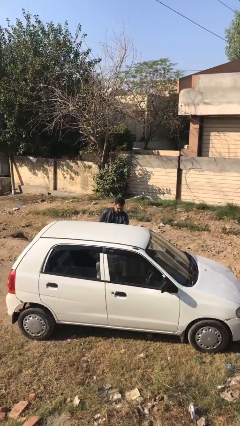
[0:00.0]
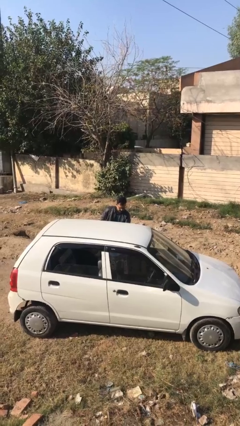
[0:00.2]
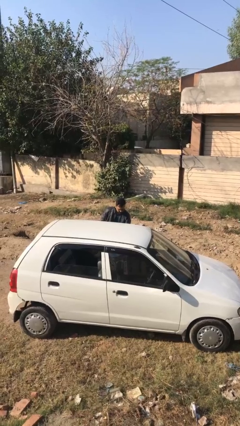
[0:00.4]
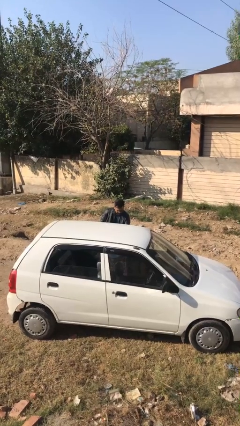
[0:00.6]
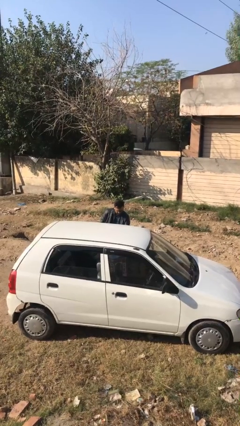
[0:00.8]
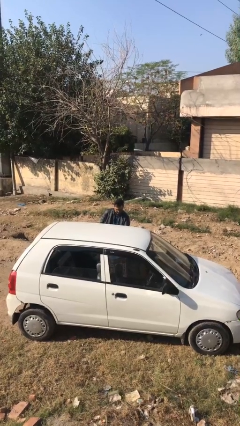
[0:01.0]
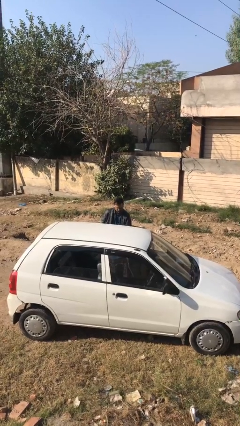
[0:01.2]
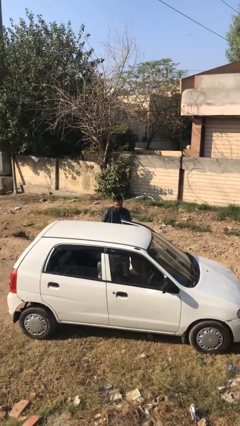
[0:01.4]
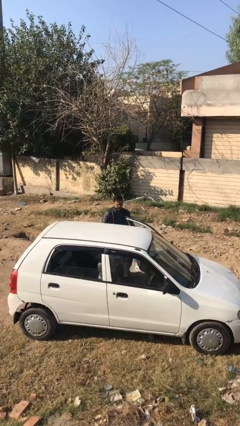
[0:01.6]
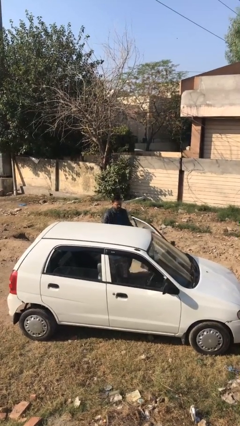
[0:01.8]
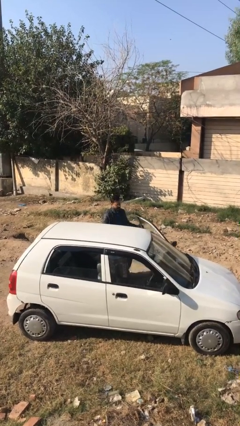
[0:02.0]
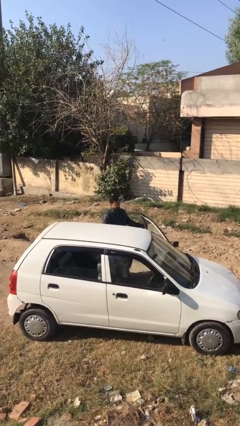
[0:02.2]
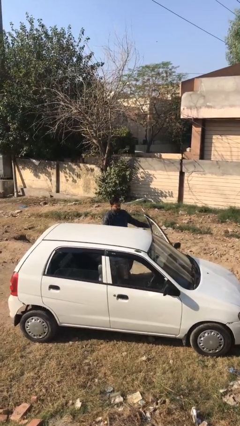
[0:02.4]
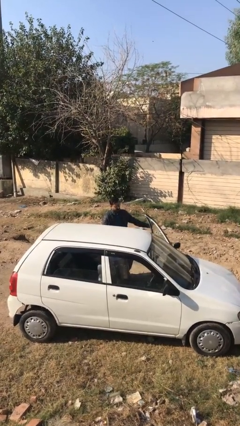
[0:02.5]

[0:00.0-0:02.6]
person opens car door

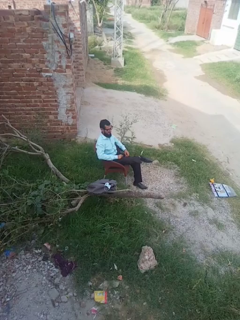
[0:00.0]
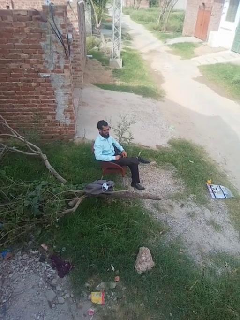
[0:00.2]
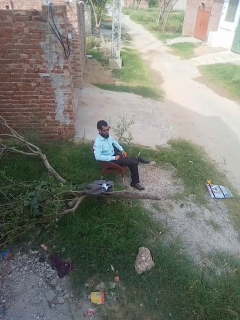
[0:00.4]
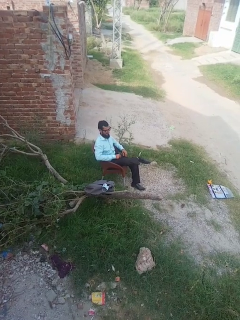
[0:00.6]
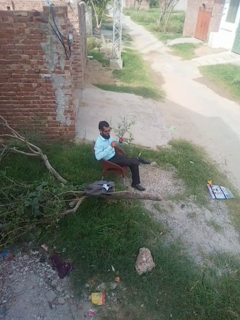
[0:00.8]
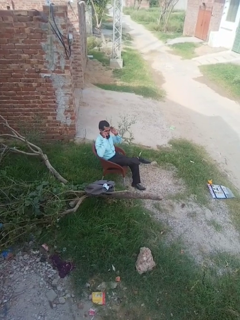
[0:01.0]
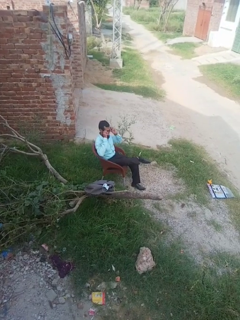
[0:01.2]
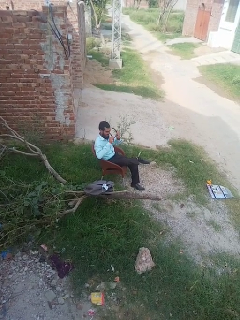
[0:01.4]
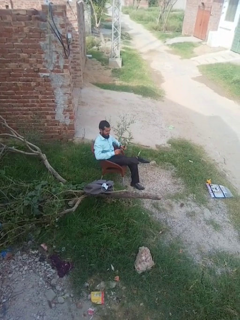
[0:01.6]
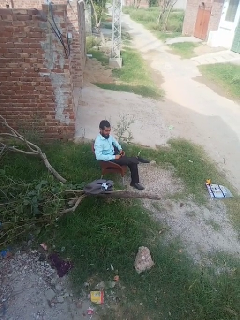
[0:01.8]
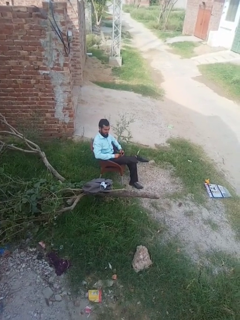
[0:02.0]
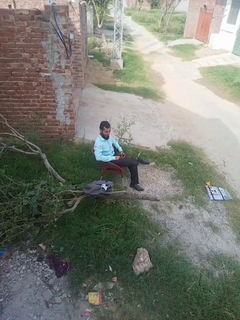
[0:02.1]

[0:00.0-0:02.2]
person takes off glasses

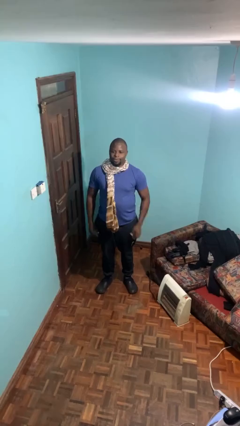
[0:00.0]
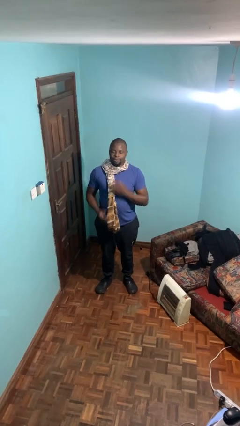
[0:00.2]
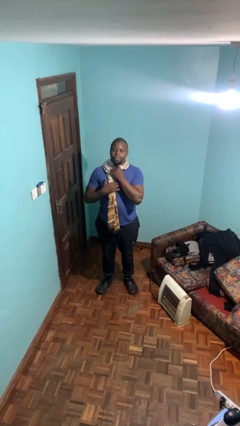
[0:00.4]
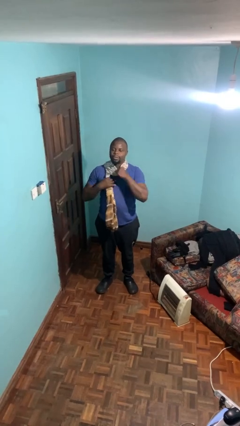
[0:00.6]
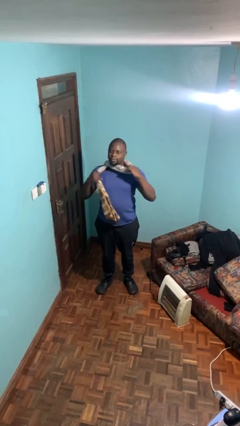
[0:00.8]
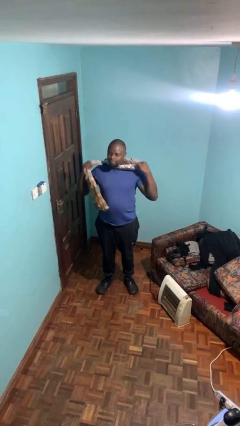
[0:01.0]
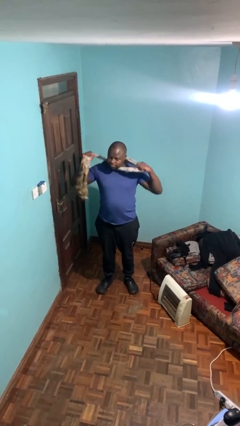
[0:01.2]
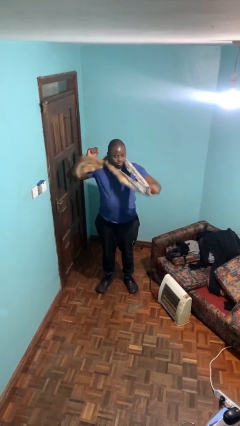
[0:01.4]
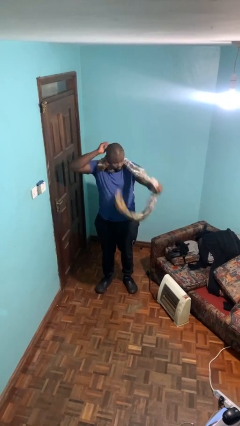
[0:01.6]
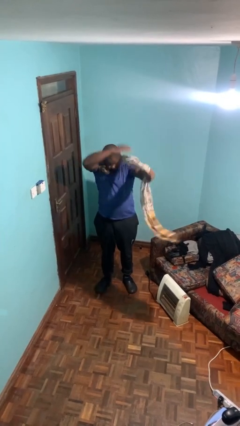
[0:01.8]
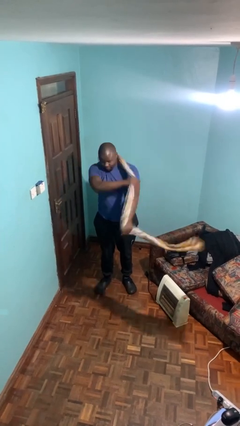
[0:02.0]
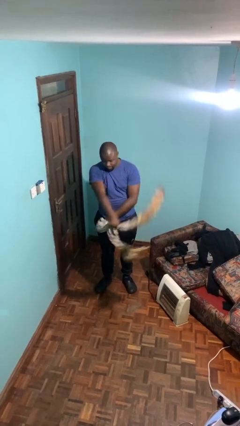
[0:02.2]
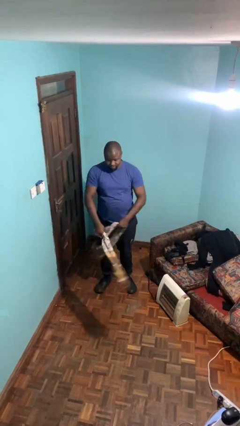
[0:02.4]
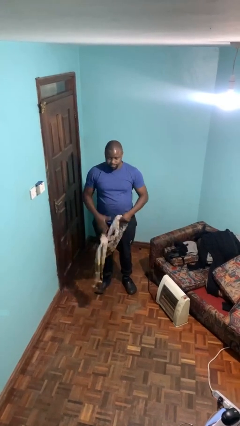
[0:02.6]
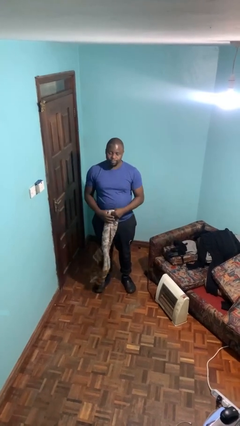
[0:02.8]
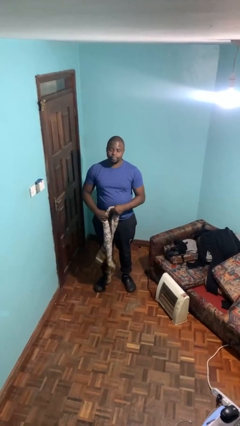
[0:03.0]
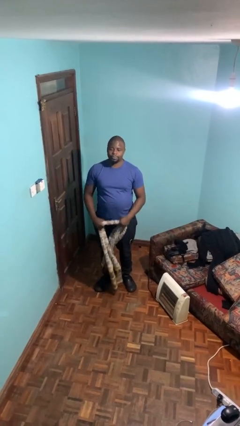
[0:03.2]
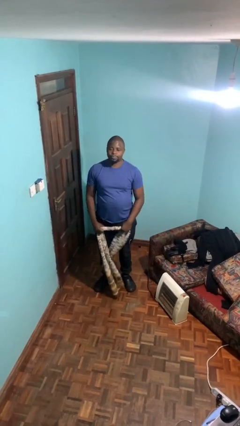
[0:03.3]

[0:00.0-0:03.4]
person takes off scarf

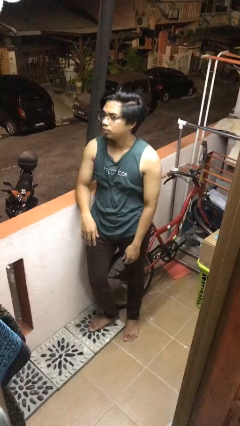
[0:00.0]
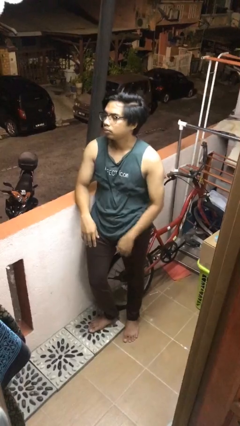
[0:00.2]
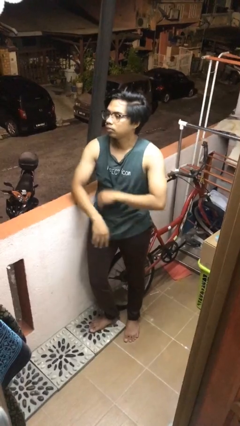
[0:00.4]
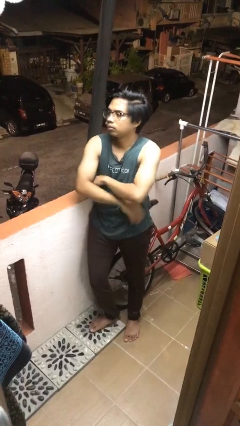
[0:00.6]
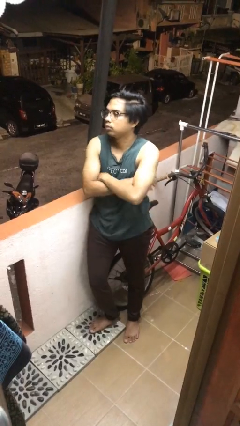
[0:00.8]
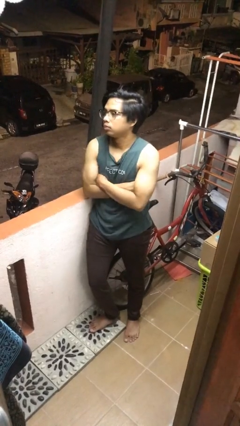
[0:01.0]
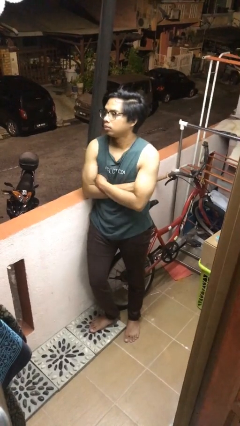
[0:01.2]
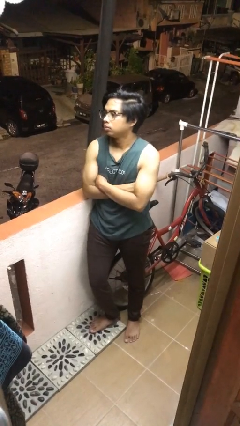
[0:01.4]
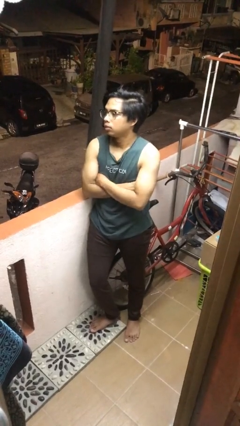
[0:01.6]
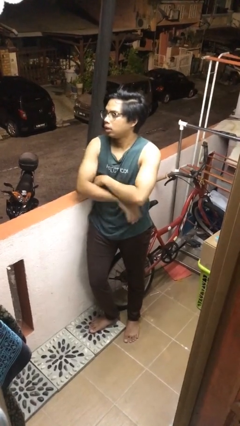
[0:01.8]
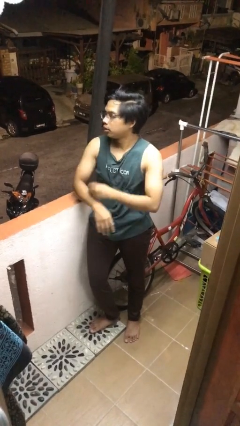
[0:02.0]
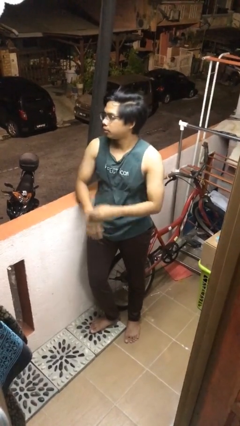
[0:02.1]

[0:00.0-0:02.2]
person crosses arms

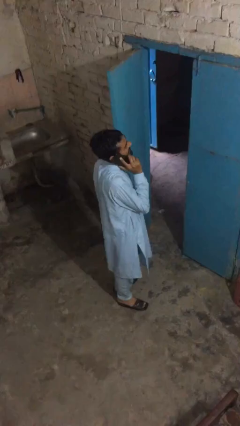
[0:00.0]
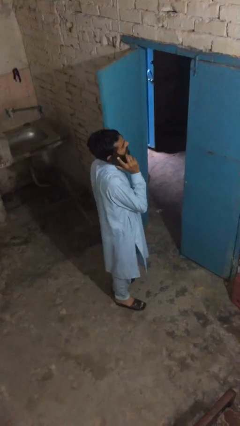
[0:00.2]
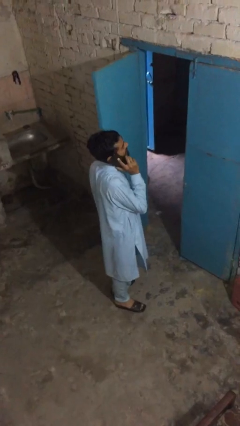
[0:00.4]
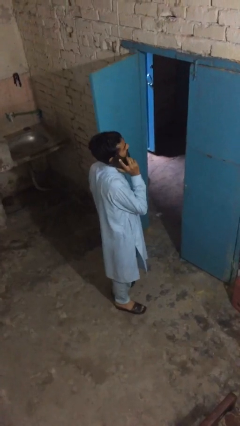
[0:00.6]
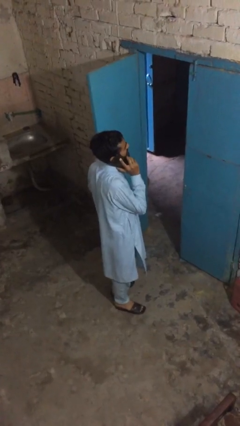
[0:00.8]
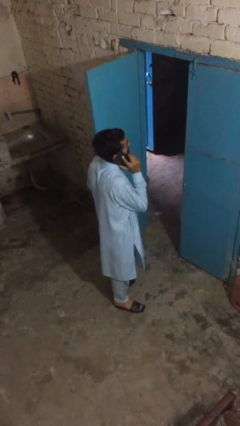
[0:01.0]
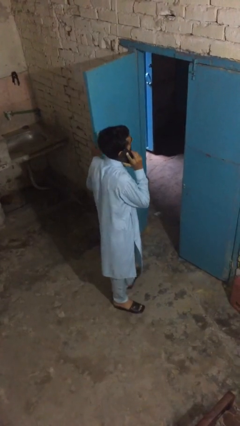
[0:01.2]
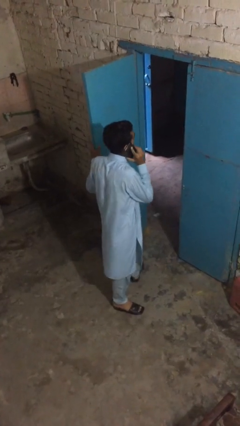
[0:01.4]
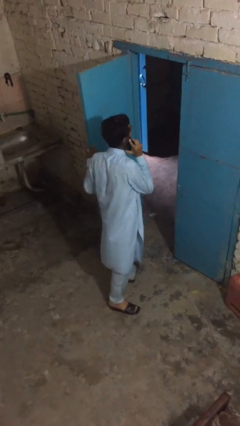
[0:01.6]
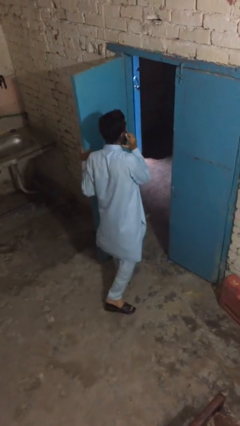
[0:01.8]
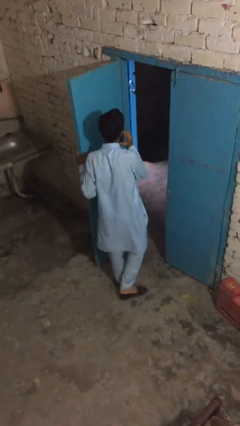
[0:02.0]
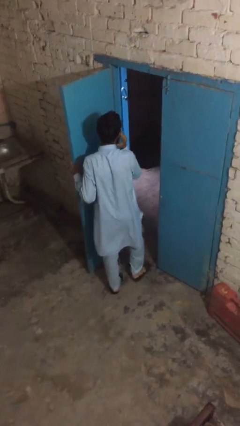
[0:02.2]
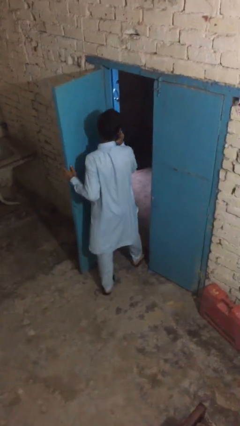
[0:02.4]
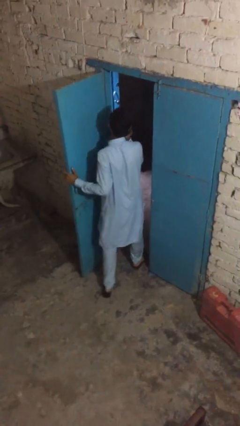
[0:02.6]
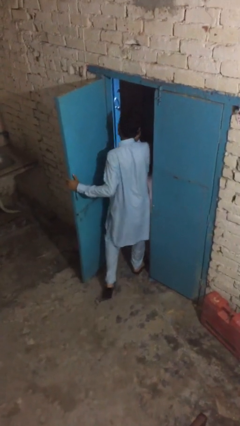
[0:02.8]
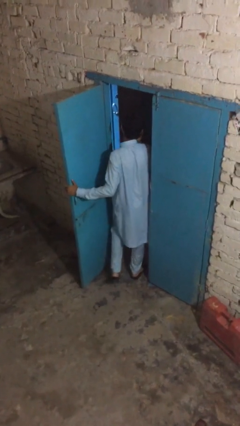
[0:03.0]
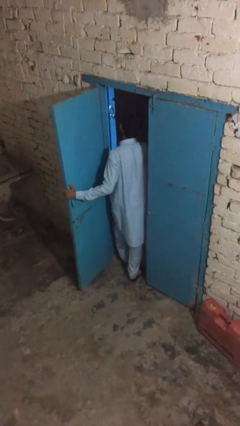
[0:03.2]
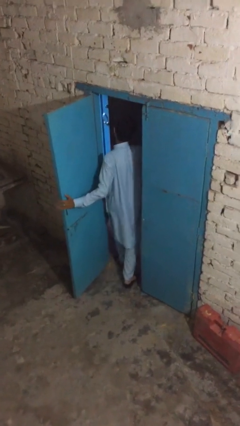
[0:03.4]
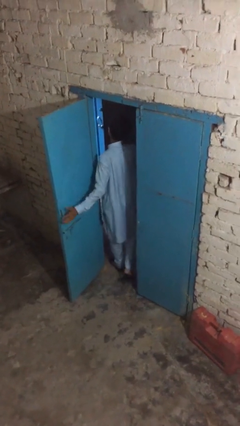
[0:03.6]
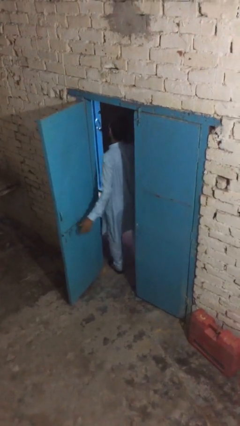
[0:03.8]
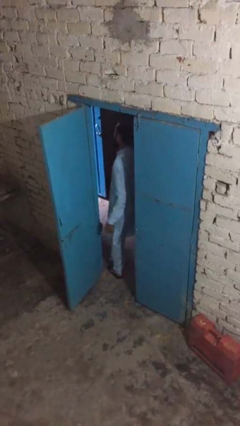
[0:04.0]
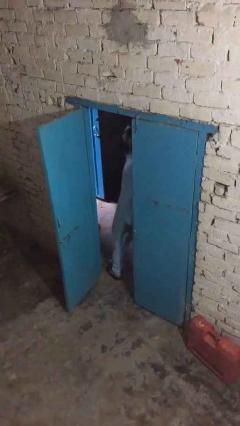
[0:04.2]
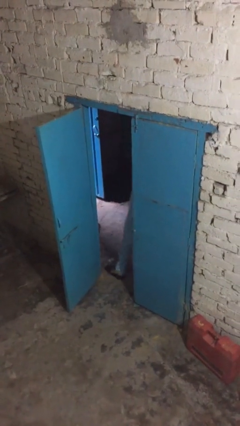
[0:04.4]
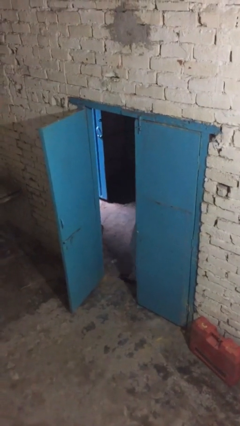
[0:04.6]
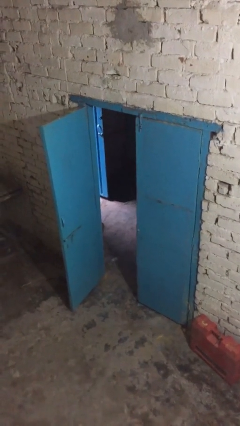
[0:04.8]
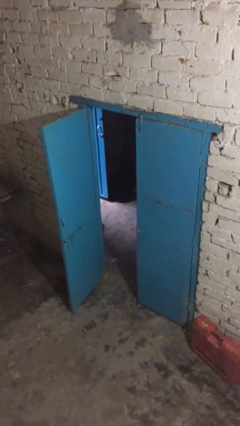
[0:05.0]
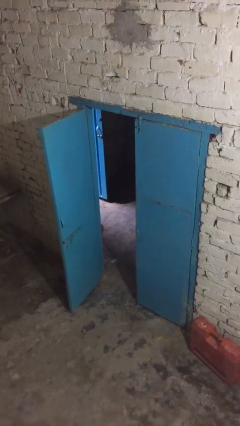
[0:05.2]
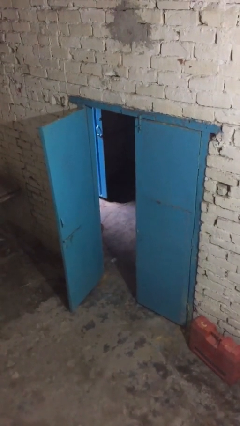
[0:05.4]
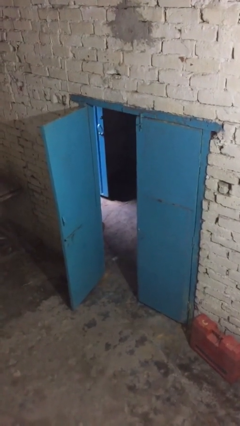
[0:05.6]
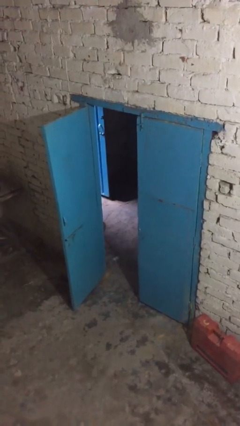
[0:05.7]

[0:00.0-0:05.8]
person exits scene through structure

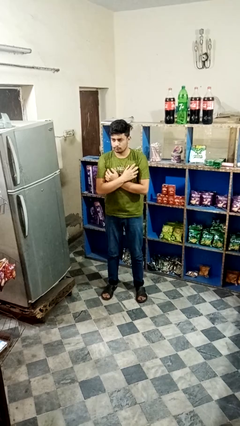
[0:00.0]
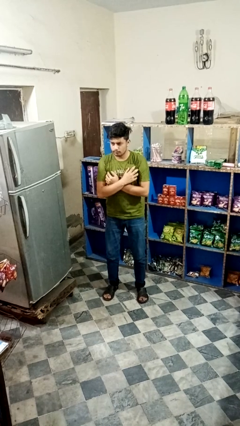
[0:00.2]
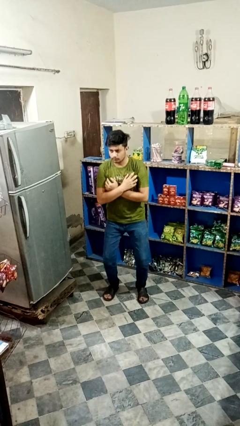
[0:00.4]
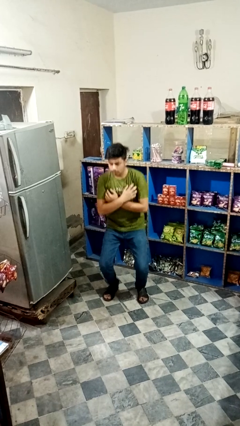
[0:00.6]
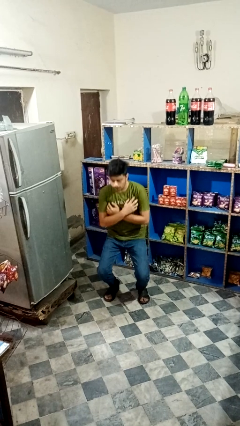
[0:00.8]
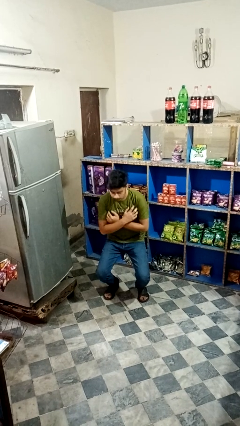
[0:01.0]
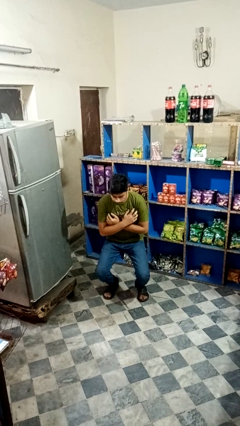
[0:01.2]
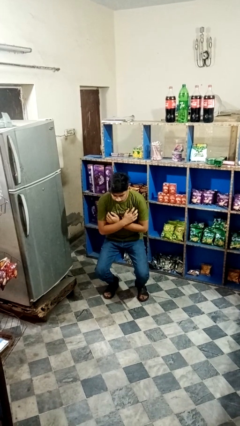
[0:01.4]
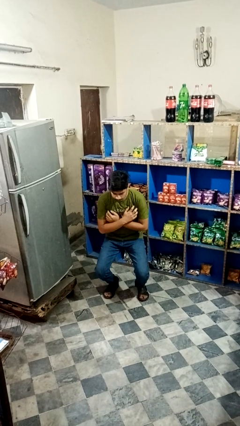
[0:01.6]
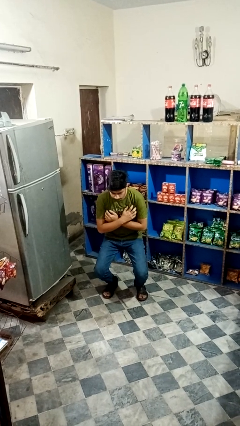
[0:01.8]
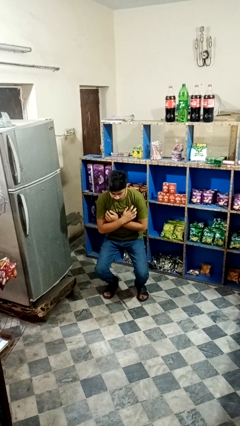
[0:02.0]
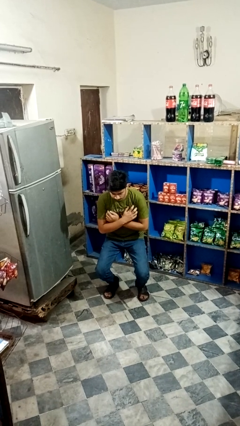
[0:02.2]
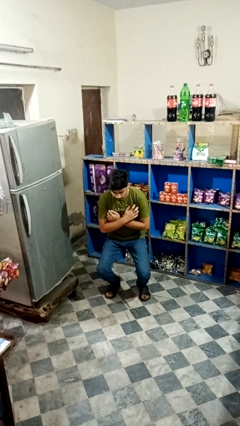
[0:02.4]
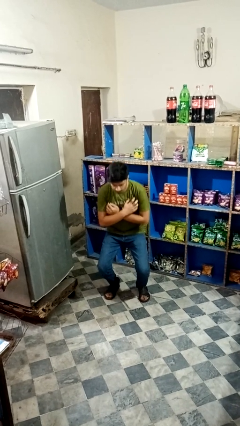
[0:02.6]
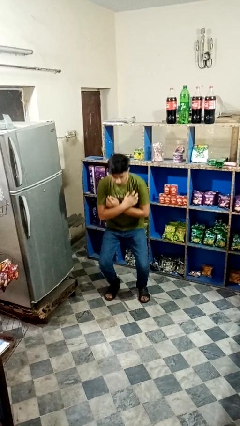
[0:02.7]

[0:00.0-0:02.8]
person squats
